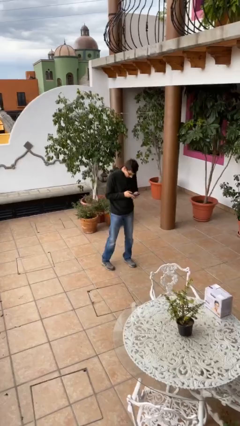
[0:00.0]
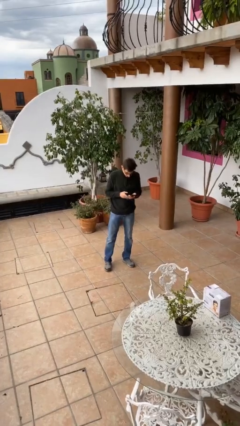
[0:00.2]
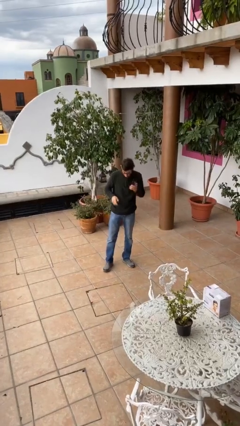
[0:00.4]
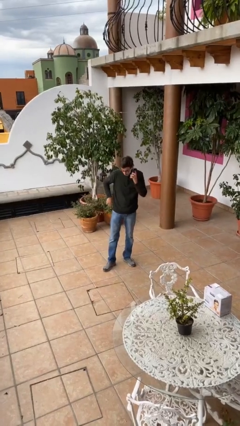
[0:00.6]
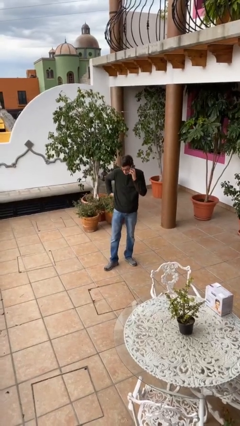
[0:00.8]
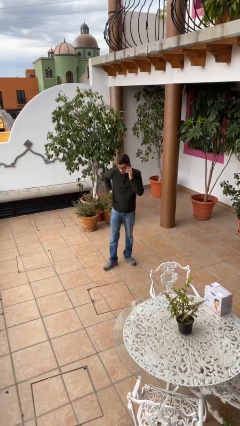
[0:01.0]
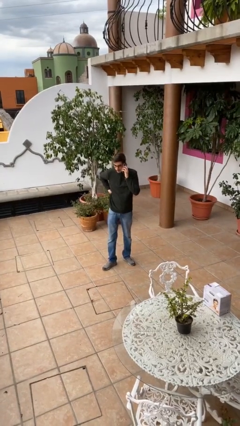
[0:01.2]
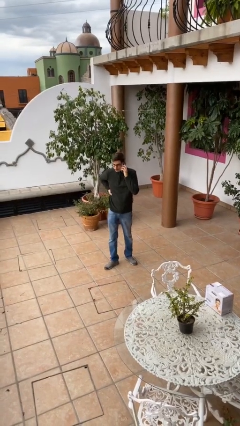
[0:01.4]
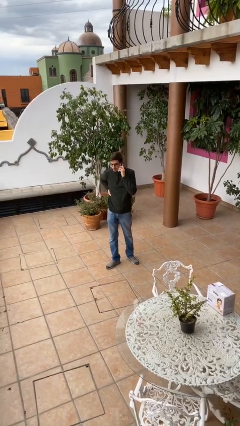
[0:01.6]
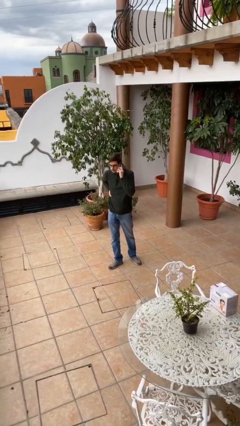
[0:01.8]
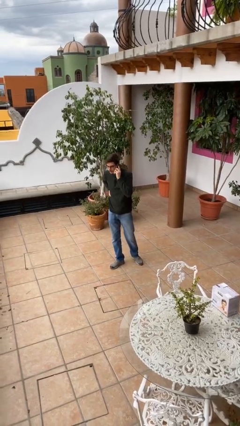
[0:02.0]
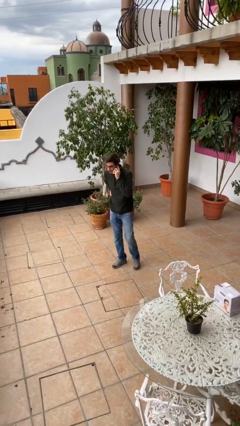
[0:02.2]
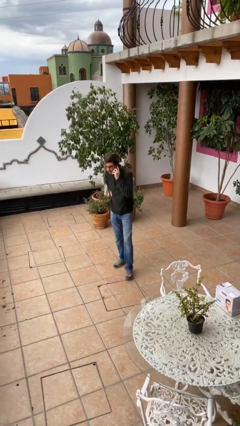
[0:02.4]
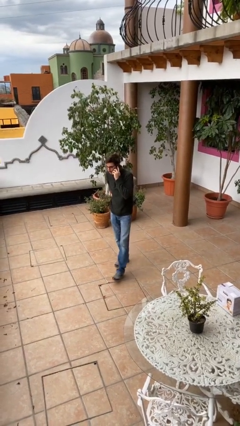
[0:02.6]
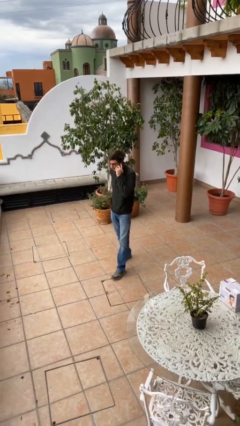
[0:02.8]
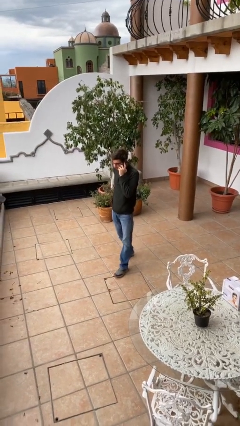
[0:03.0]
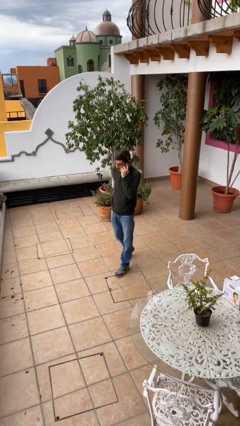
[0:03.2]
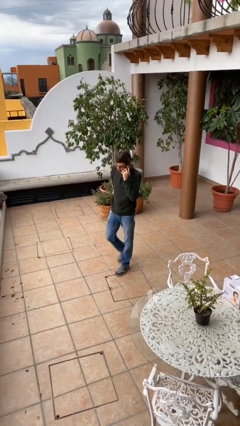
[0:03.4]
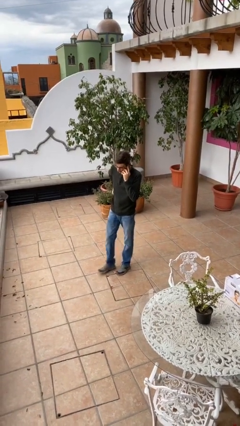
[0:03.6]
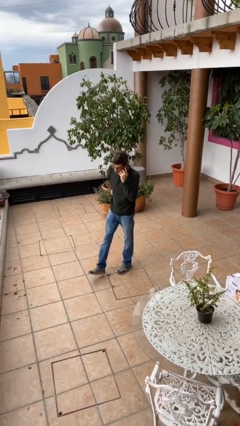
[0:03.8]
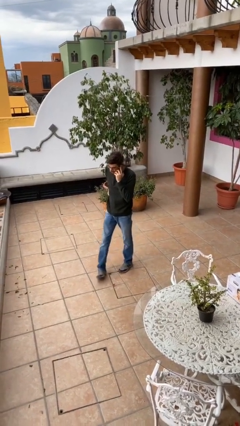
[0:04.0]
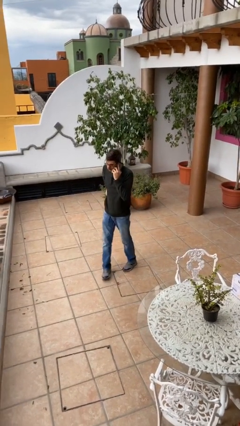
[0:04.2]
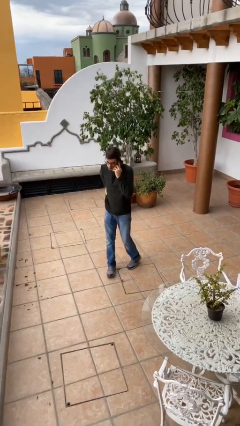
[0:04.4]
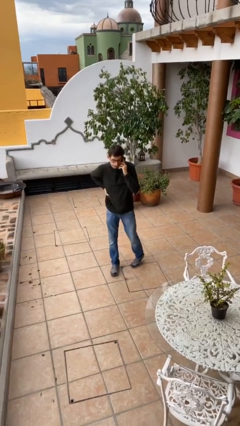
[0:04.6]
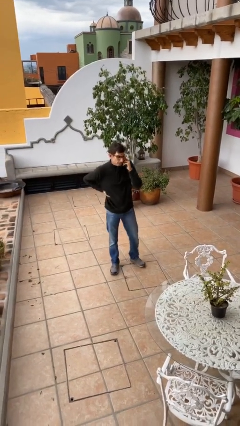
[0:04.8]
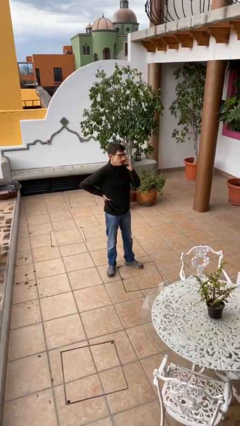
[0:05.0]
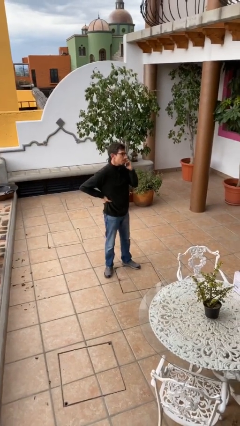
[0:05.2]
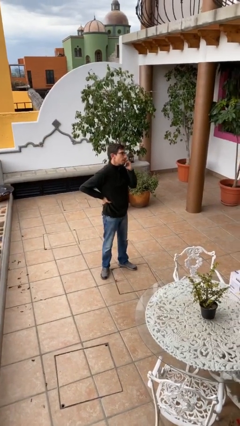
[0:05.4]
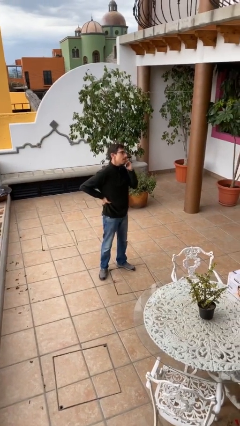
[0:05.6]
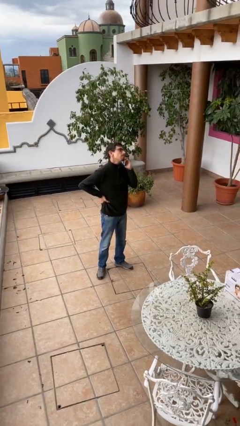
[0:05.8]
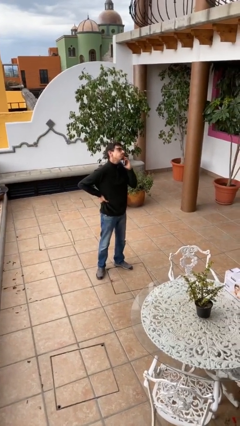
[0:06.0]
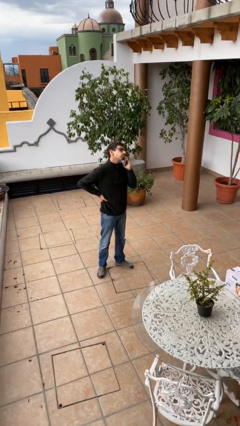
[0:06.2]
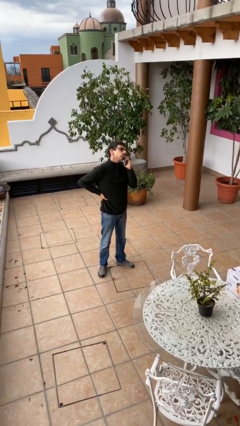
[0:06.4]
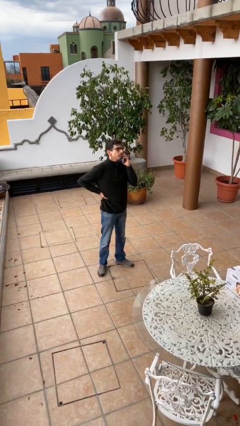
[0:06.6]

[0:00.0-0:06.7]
person talks on phone

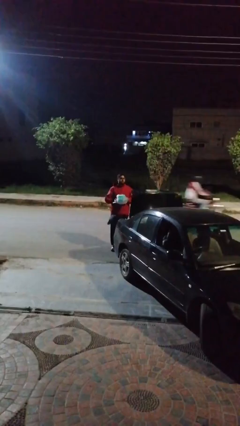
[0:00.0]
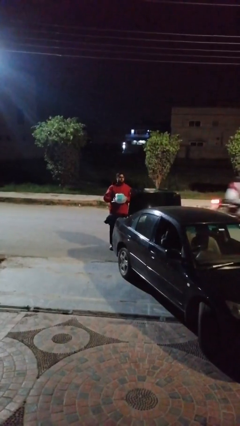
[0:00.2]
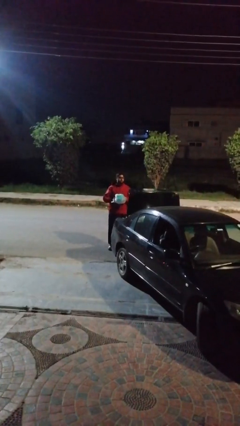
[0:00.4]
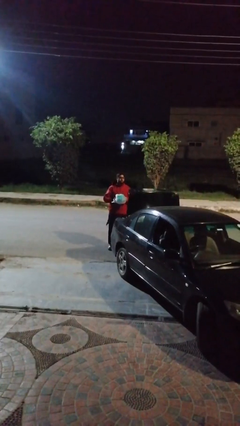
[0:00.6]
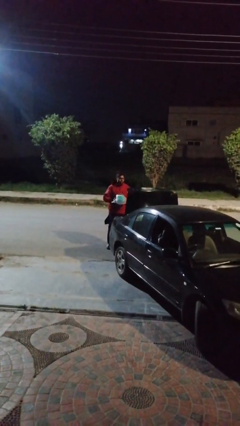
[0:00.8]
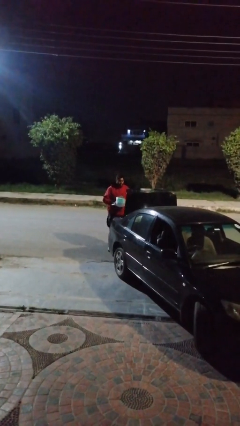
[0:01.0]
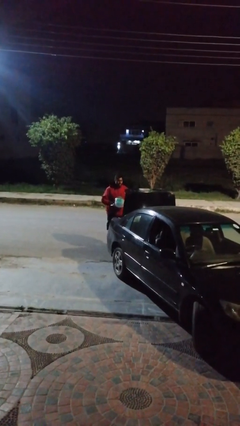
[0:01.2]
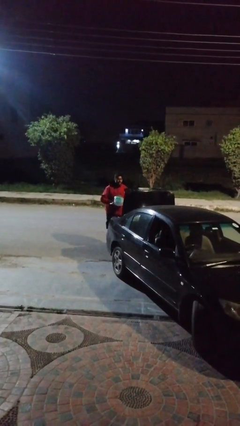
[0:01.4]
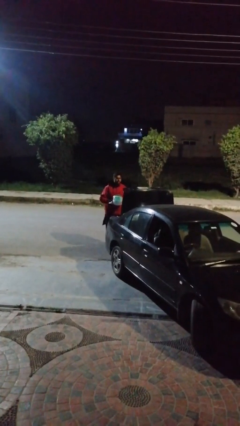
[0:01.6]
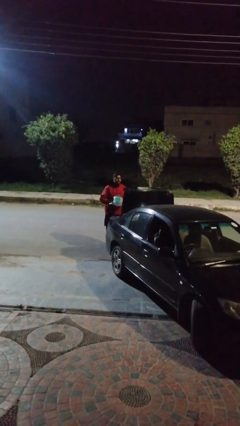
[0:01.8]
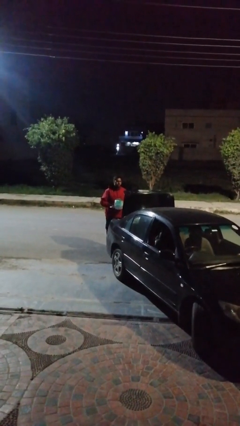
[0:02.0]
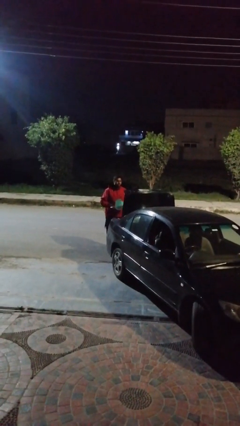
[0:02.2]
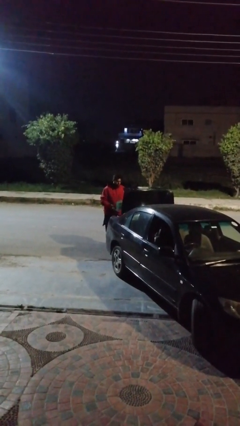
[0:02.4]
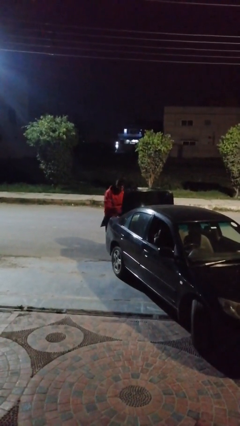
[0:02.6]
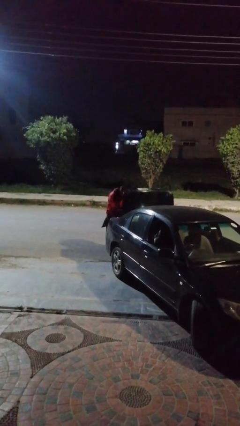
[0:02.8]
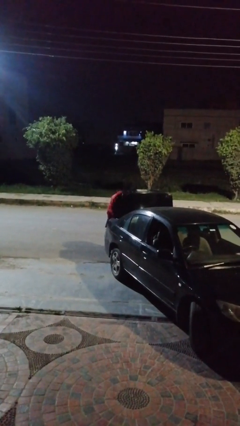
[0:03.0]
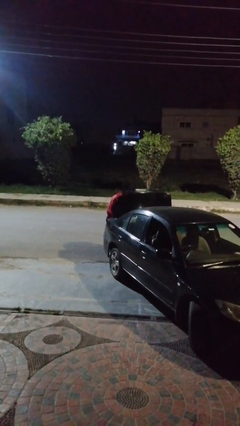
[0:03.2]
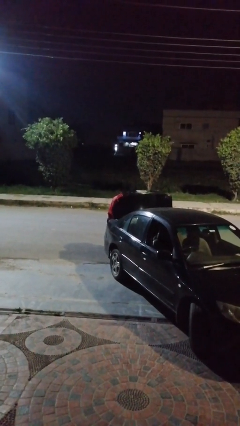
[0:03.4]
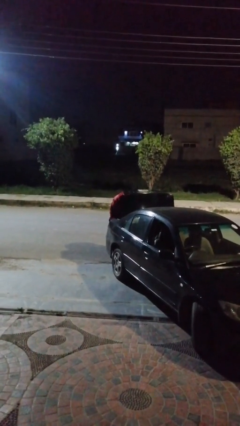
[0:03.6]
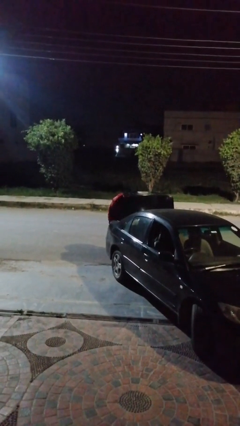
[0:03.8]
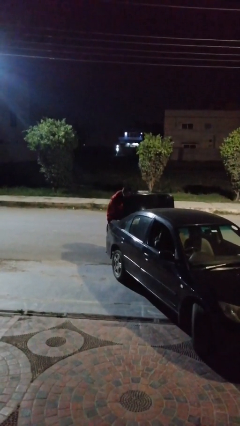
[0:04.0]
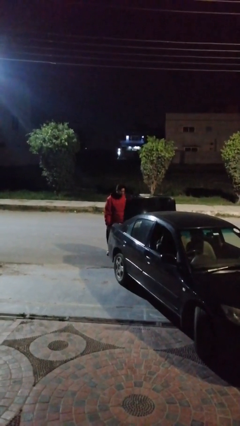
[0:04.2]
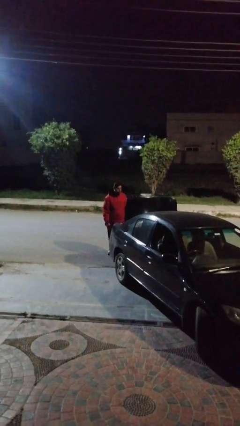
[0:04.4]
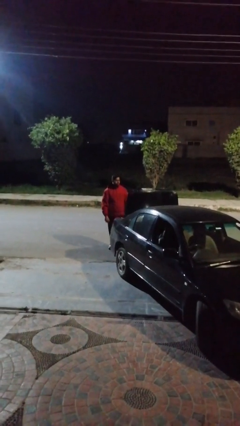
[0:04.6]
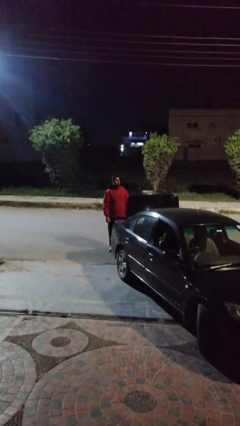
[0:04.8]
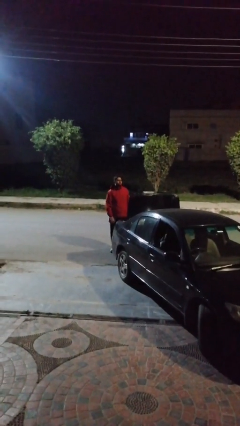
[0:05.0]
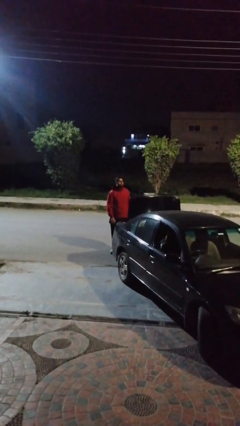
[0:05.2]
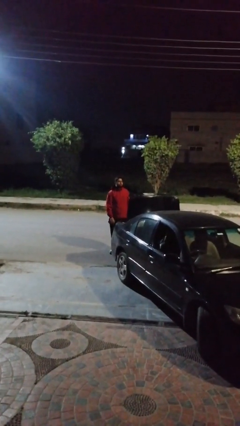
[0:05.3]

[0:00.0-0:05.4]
person loads car

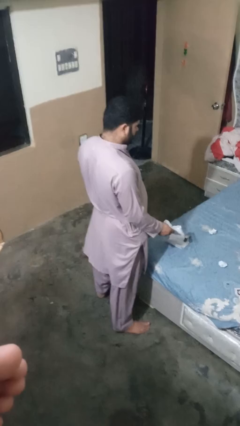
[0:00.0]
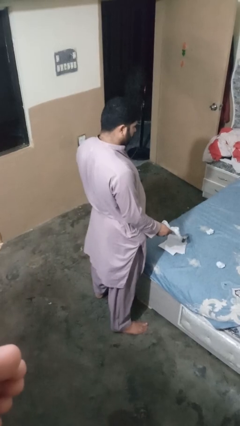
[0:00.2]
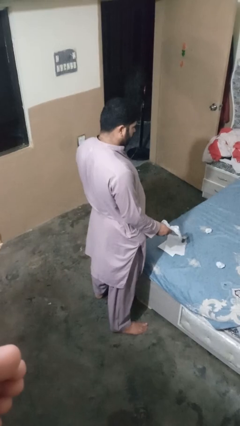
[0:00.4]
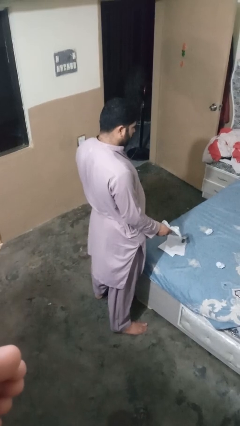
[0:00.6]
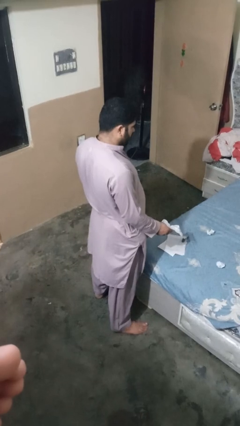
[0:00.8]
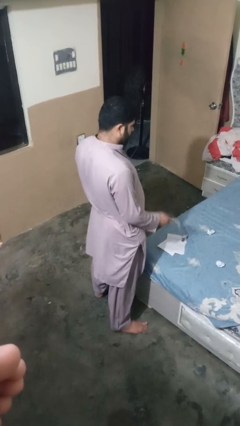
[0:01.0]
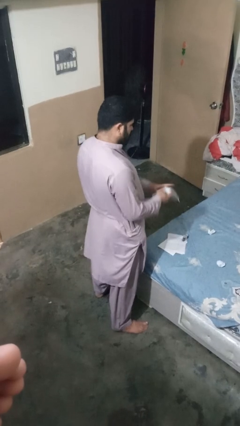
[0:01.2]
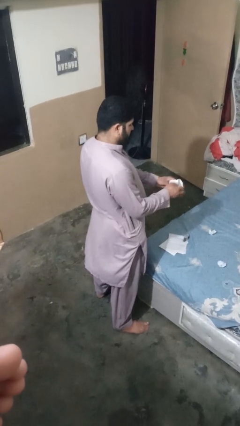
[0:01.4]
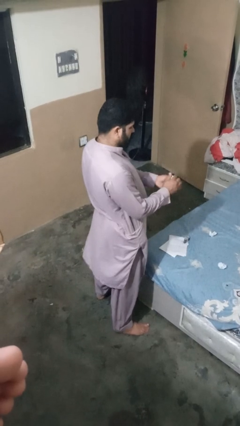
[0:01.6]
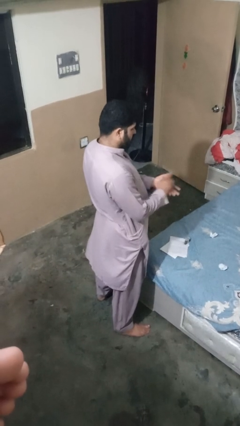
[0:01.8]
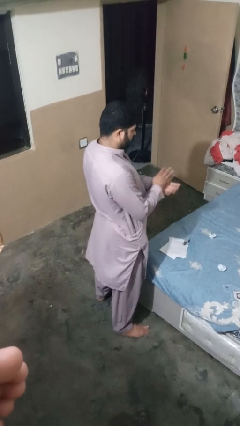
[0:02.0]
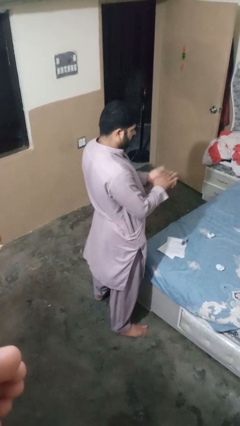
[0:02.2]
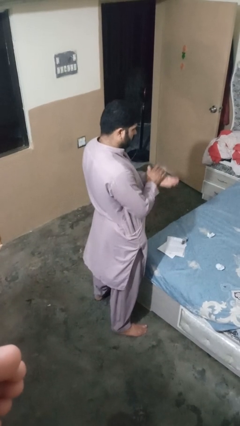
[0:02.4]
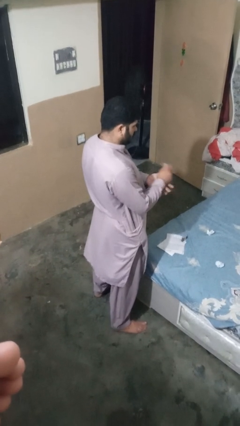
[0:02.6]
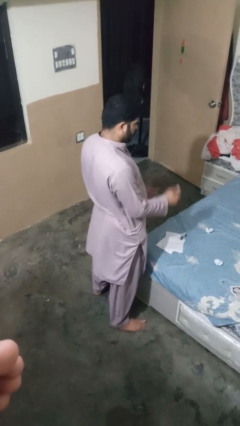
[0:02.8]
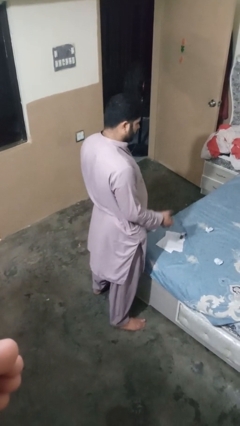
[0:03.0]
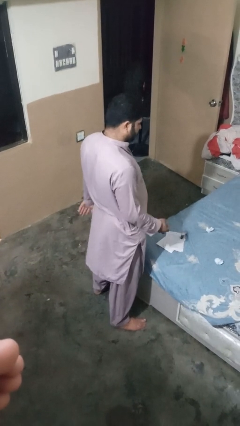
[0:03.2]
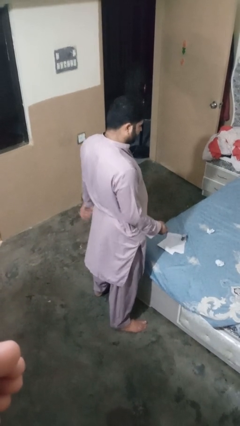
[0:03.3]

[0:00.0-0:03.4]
person crumples paper

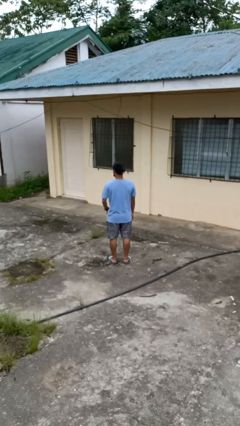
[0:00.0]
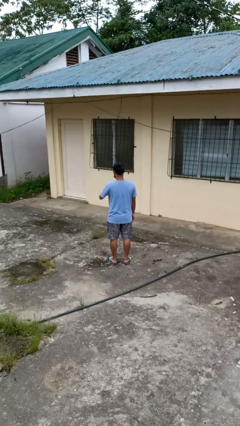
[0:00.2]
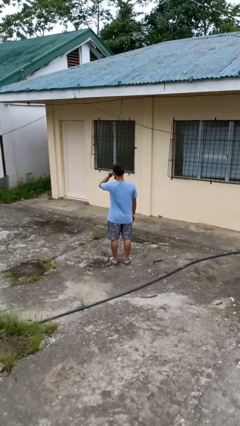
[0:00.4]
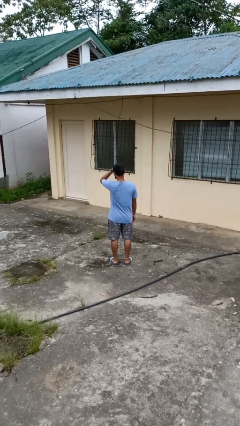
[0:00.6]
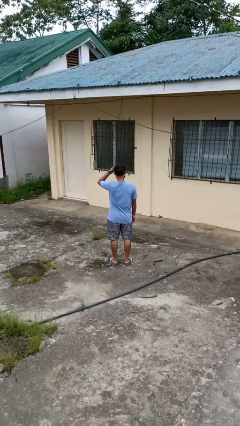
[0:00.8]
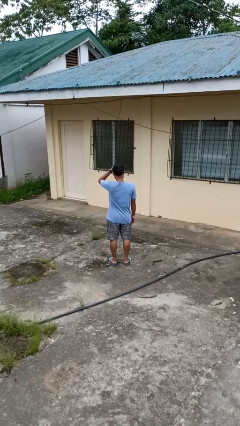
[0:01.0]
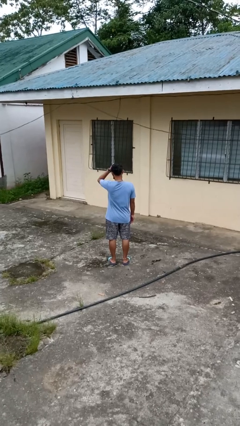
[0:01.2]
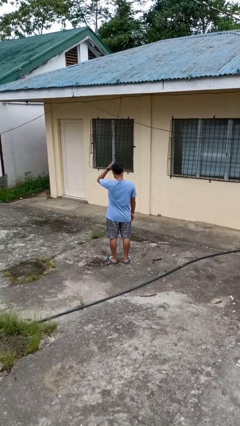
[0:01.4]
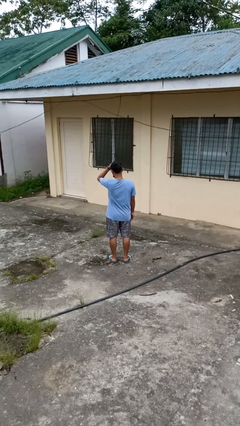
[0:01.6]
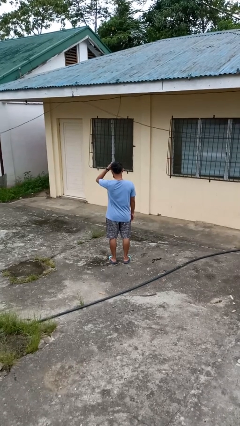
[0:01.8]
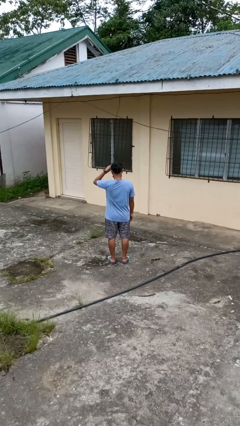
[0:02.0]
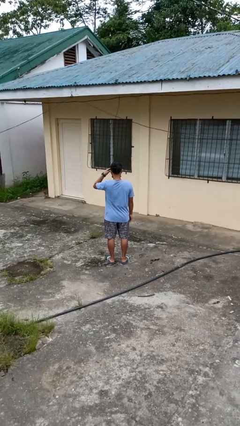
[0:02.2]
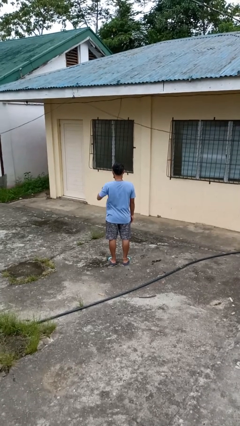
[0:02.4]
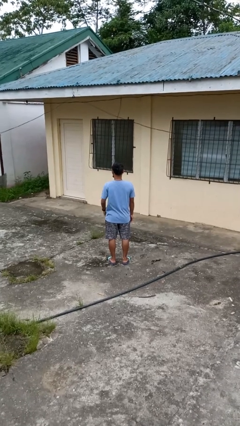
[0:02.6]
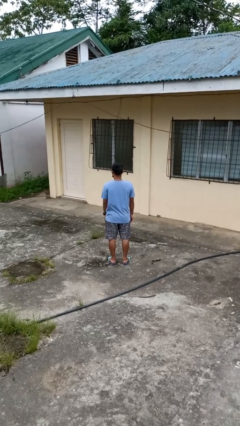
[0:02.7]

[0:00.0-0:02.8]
person scratches face
